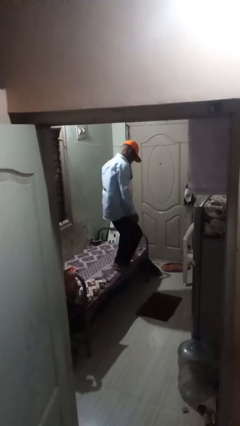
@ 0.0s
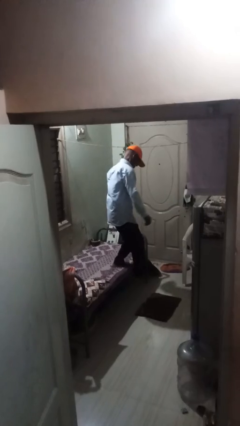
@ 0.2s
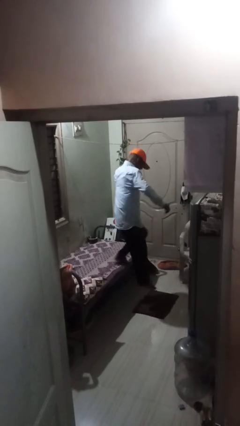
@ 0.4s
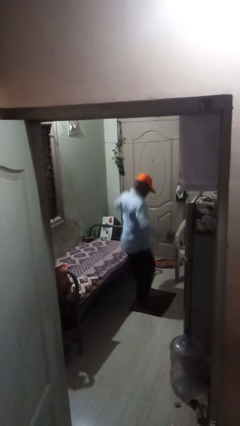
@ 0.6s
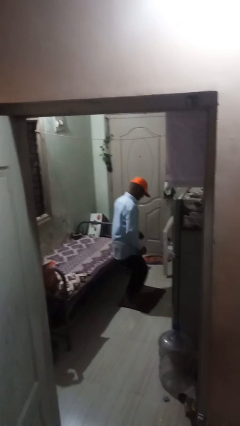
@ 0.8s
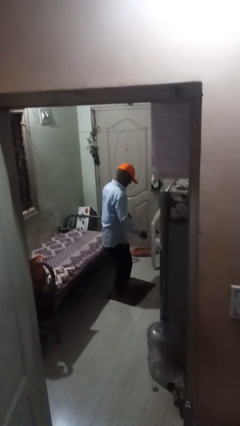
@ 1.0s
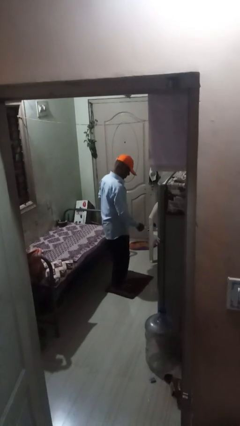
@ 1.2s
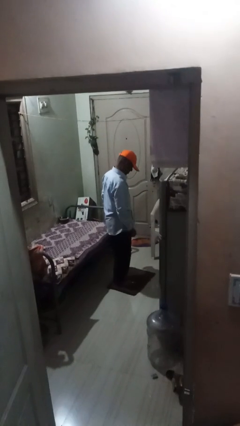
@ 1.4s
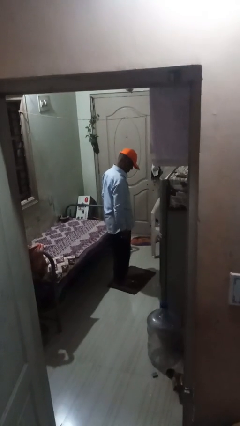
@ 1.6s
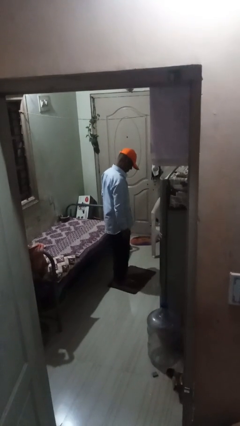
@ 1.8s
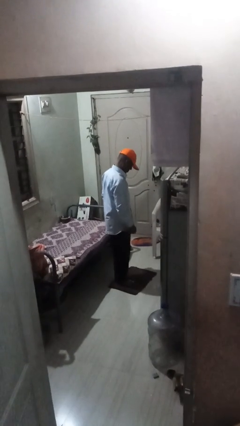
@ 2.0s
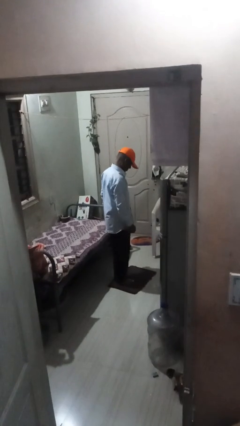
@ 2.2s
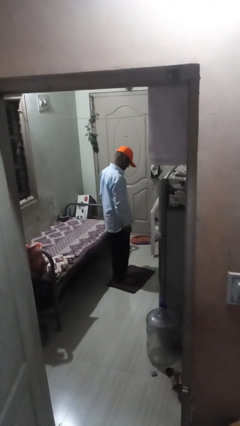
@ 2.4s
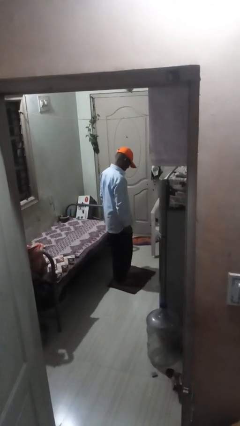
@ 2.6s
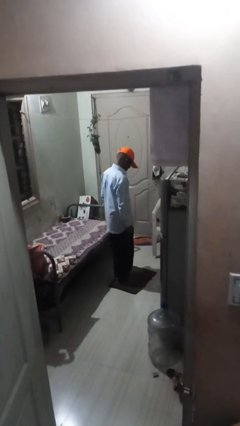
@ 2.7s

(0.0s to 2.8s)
person jumps on bed

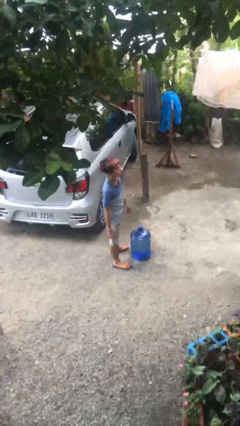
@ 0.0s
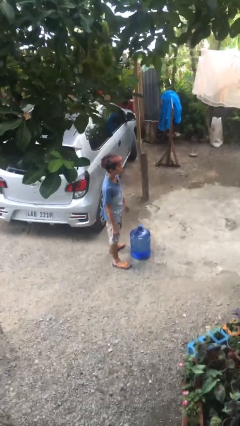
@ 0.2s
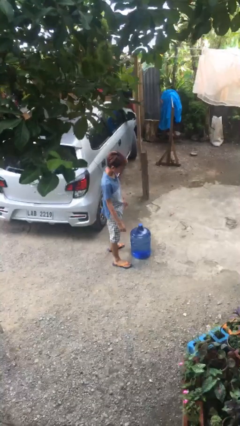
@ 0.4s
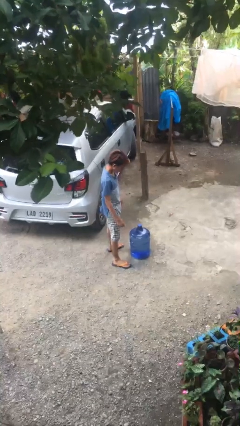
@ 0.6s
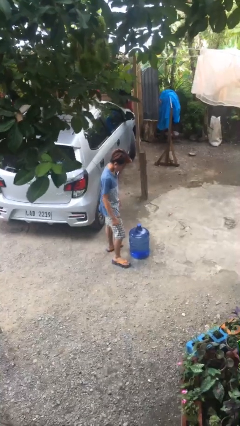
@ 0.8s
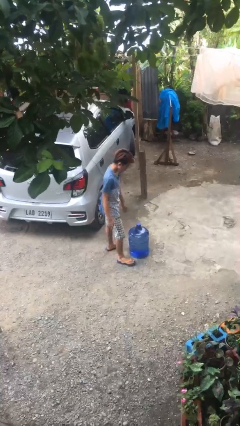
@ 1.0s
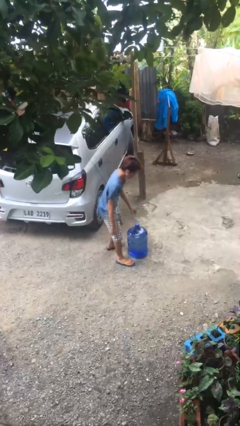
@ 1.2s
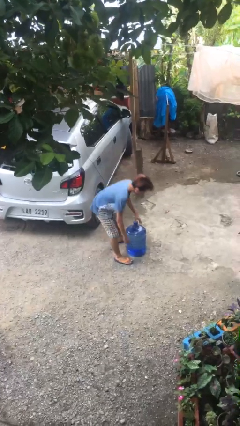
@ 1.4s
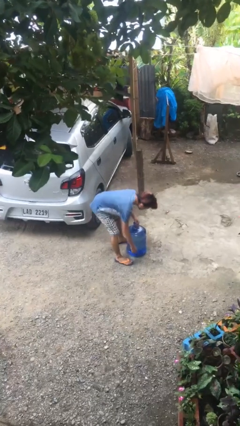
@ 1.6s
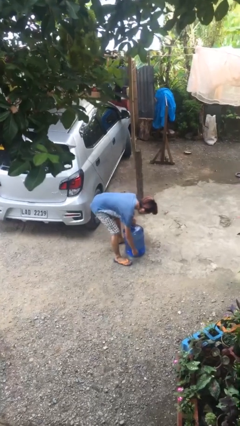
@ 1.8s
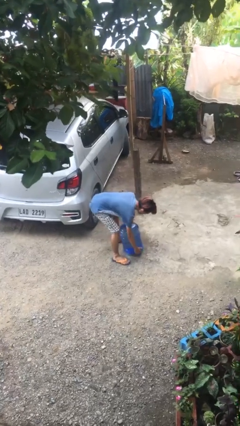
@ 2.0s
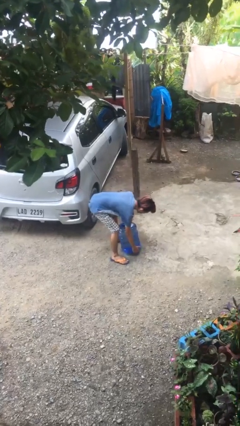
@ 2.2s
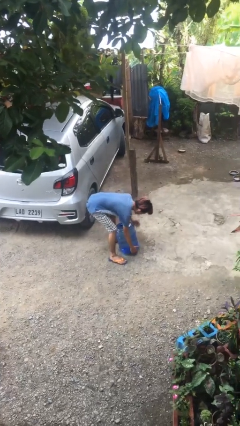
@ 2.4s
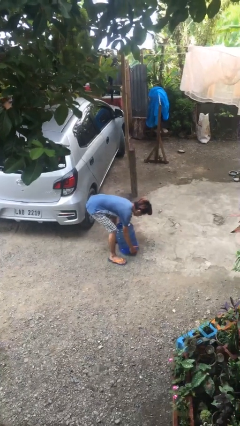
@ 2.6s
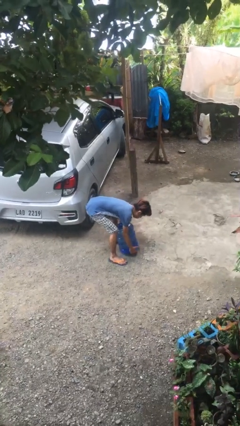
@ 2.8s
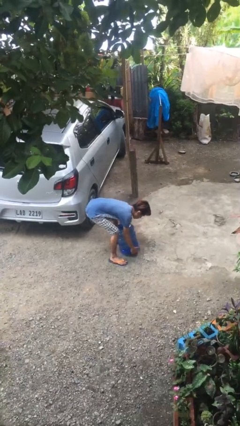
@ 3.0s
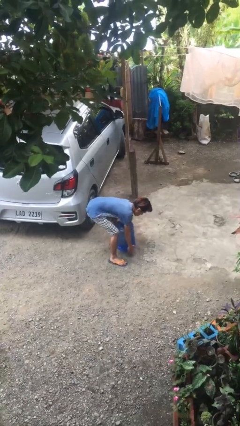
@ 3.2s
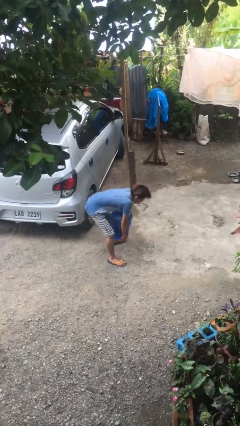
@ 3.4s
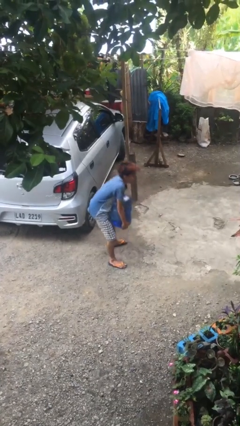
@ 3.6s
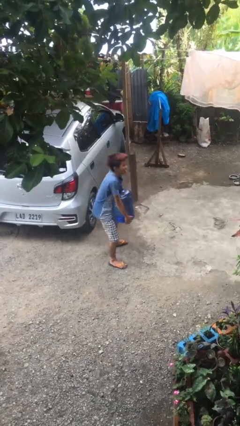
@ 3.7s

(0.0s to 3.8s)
person picks up object from floor

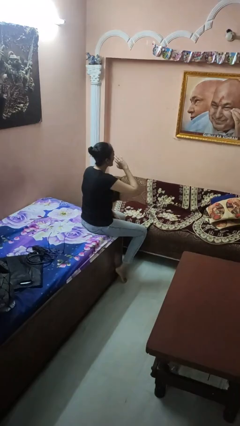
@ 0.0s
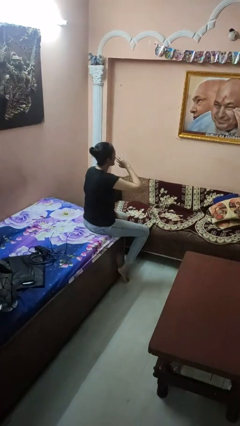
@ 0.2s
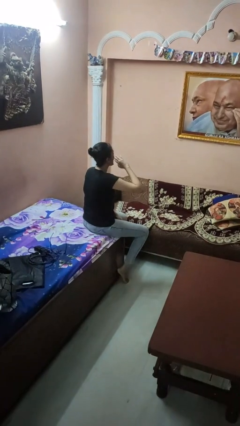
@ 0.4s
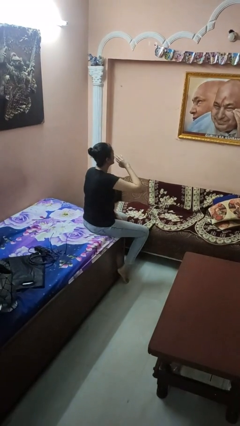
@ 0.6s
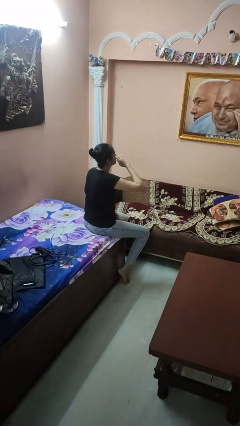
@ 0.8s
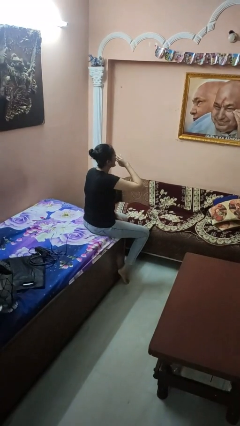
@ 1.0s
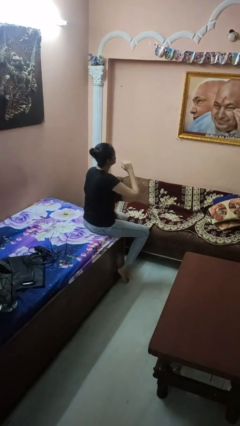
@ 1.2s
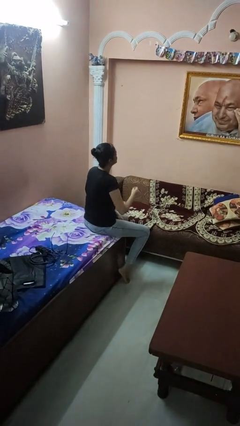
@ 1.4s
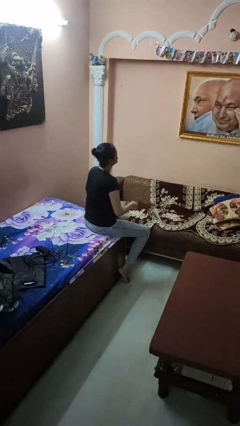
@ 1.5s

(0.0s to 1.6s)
person licks fingers

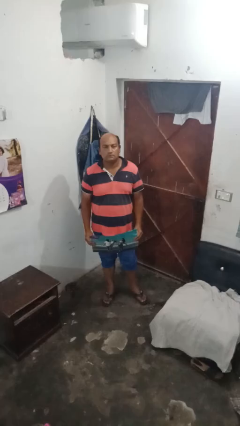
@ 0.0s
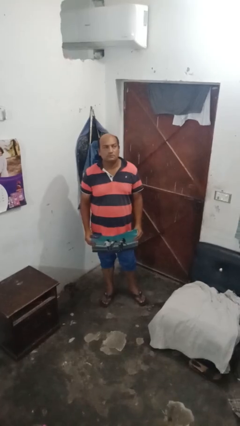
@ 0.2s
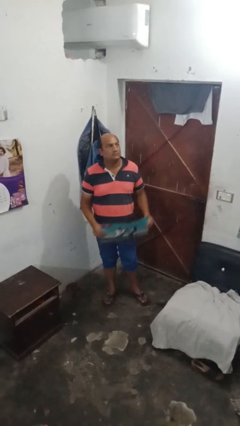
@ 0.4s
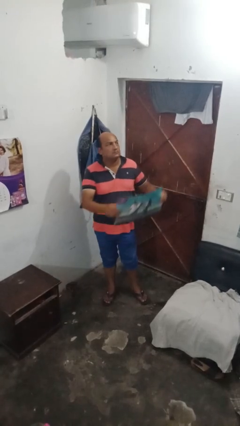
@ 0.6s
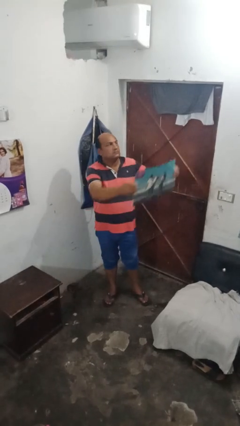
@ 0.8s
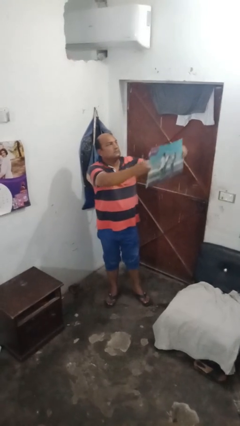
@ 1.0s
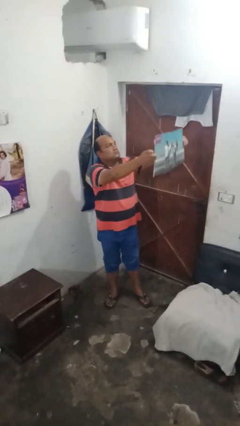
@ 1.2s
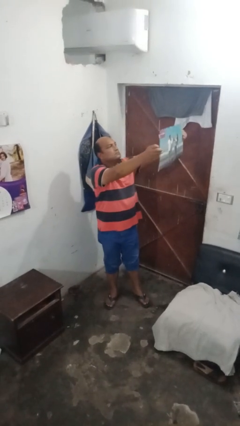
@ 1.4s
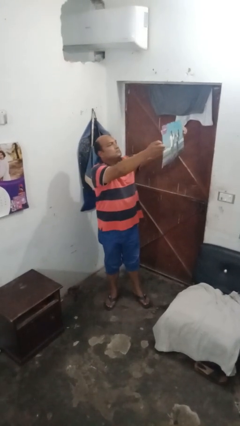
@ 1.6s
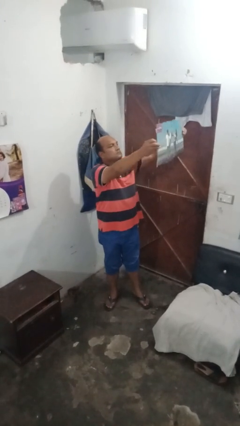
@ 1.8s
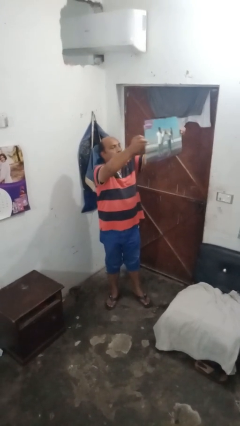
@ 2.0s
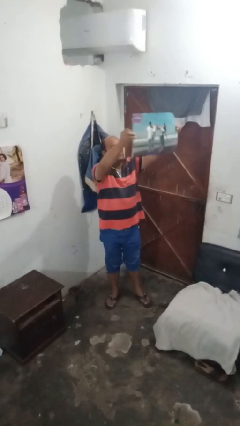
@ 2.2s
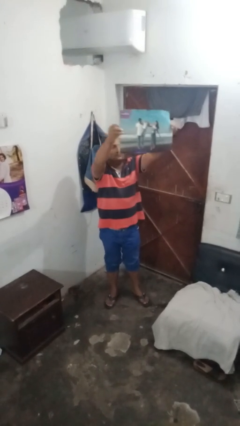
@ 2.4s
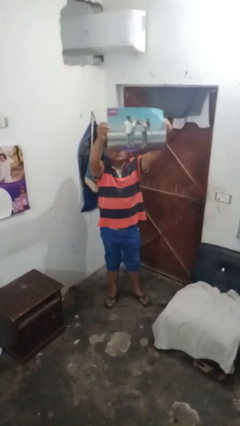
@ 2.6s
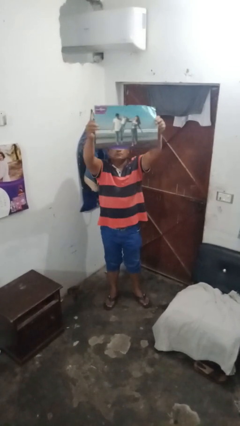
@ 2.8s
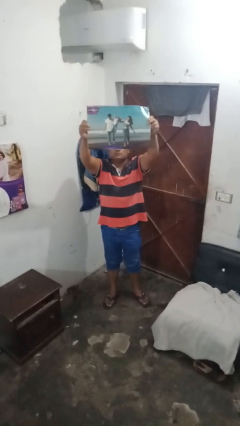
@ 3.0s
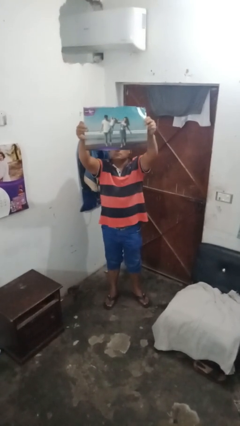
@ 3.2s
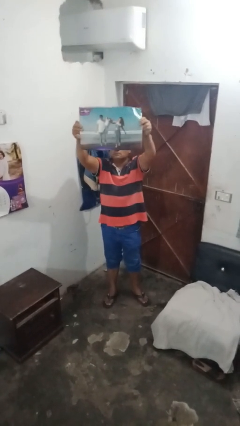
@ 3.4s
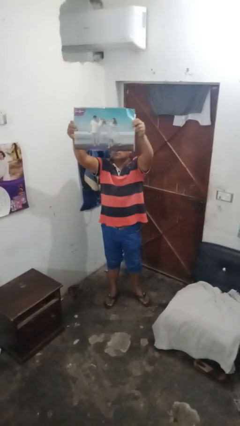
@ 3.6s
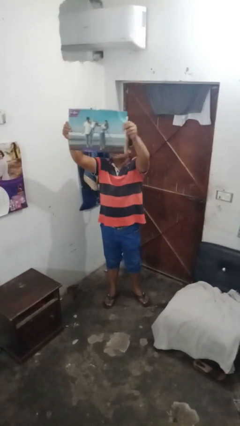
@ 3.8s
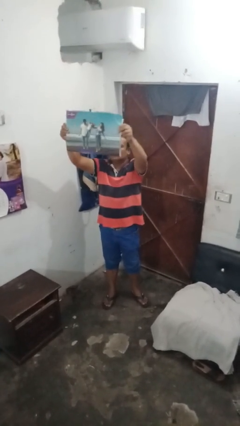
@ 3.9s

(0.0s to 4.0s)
person holds object above head

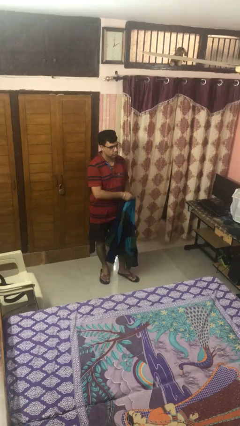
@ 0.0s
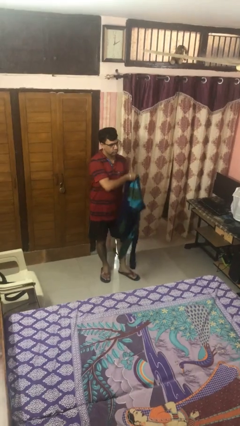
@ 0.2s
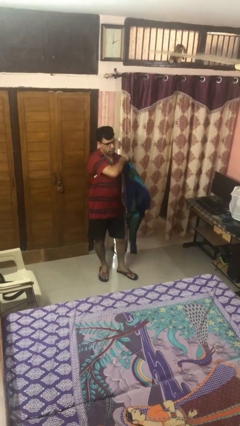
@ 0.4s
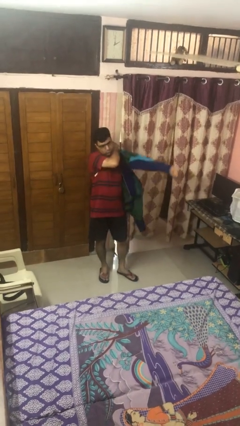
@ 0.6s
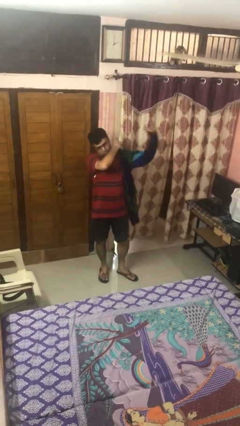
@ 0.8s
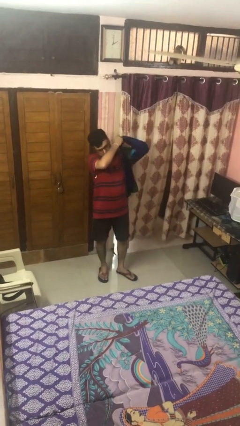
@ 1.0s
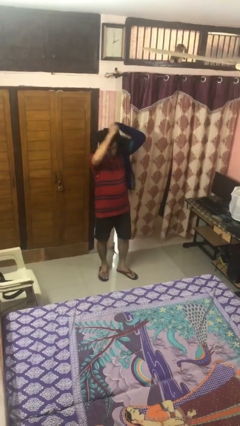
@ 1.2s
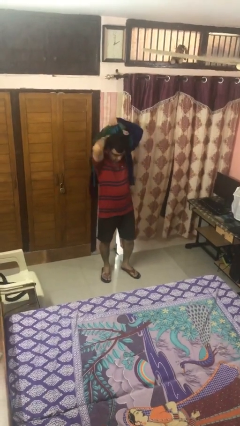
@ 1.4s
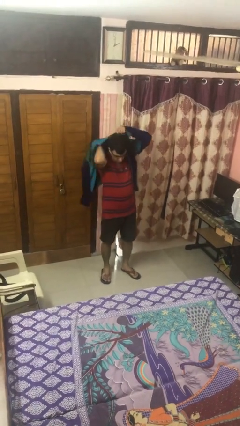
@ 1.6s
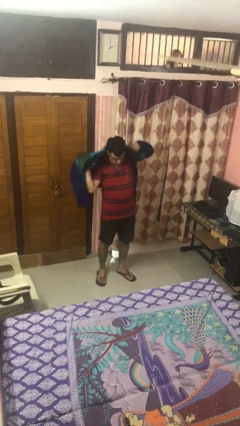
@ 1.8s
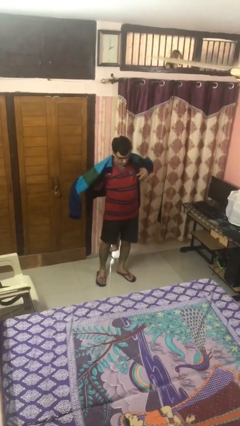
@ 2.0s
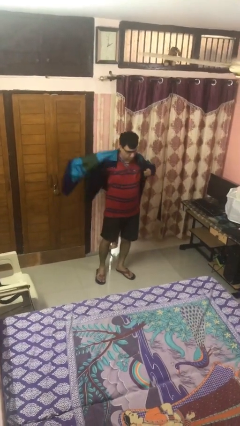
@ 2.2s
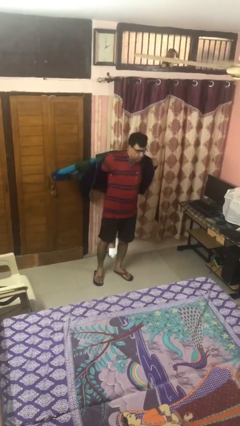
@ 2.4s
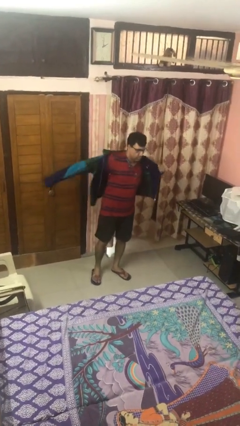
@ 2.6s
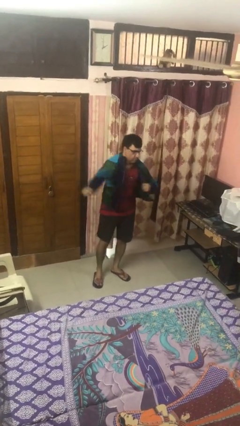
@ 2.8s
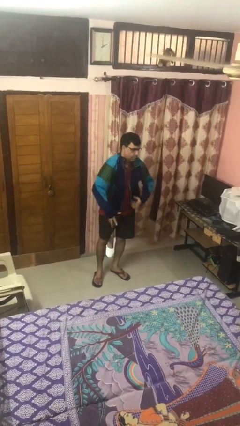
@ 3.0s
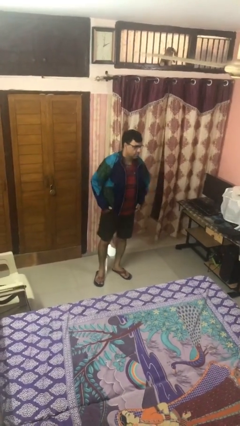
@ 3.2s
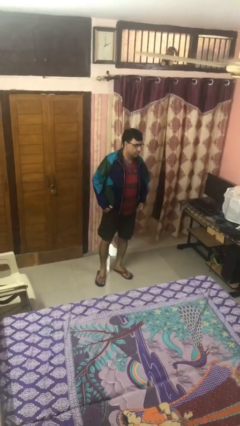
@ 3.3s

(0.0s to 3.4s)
person puts on jacket

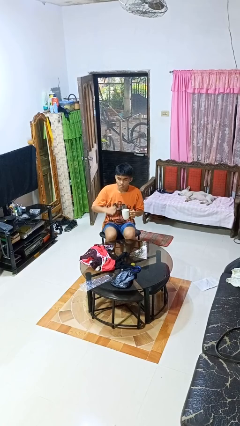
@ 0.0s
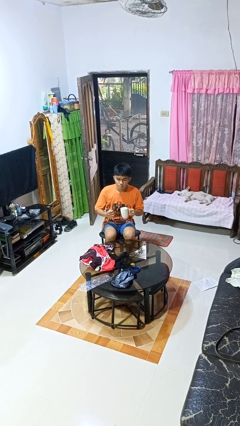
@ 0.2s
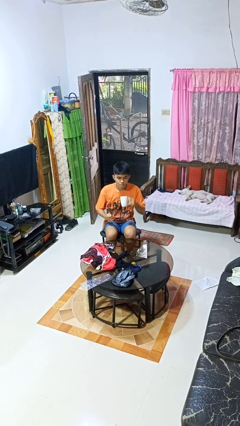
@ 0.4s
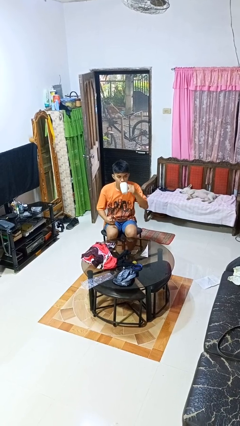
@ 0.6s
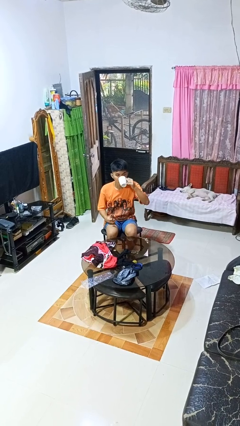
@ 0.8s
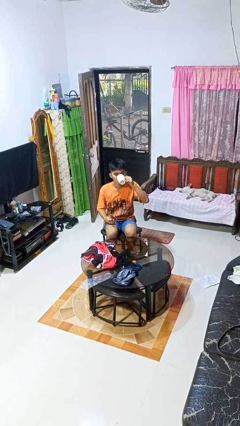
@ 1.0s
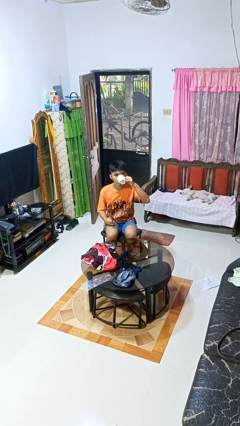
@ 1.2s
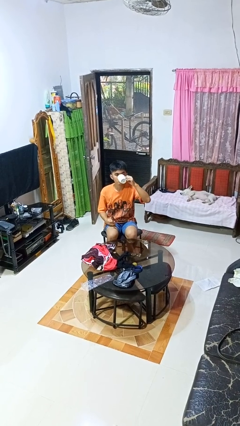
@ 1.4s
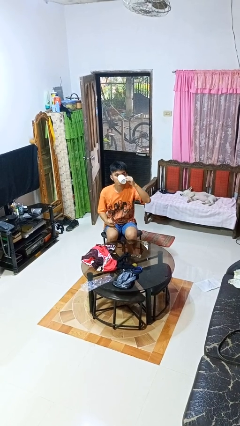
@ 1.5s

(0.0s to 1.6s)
person drinks from mug
